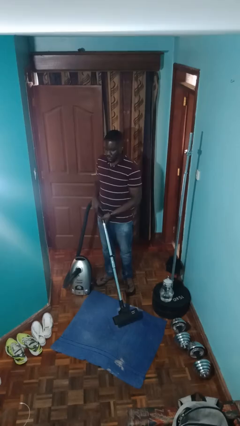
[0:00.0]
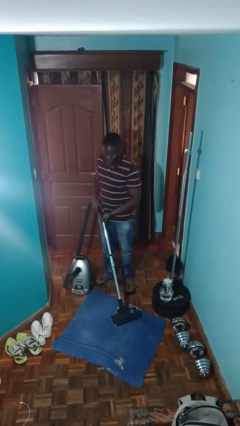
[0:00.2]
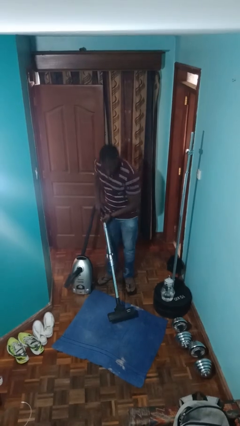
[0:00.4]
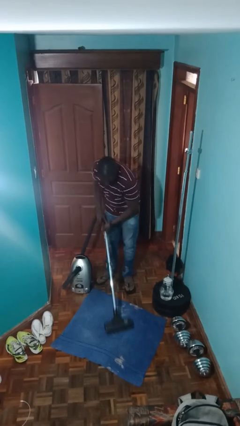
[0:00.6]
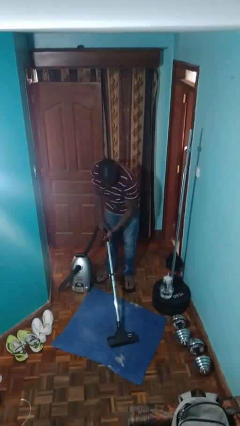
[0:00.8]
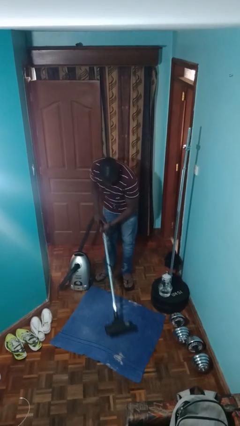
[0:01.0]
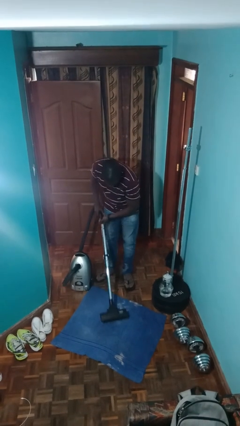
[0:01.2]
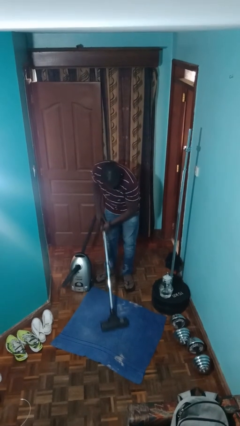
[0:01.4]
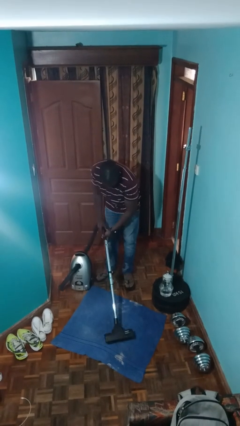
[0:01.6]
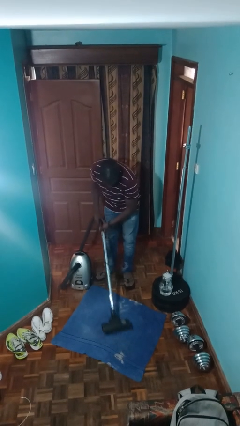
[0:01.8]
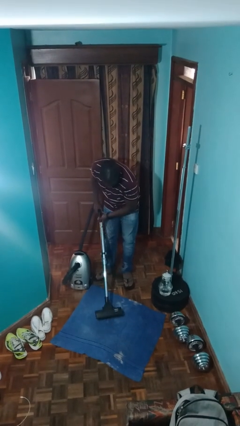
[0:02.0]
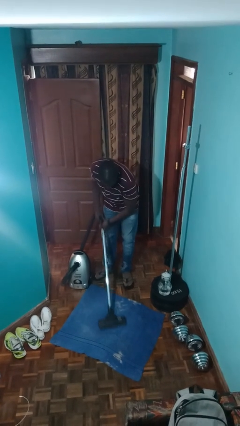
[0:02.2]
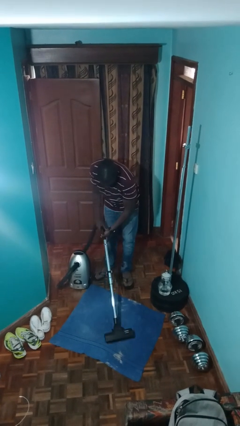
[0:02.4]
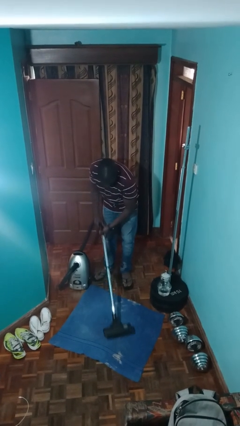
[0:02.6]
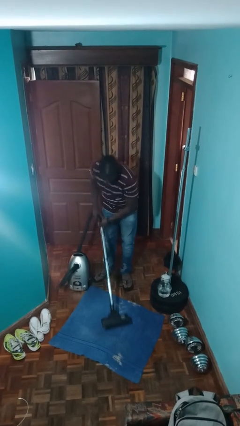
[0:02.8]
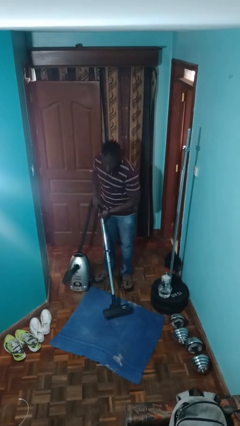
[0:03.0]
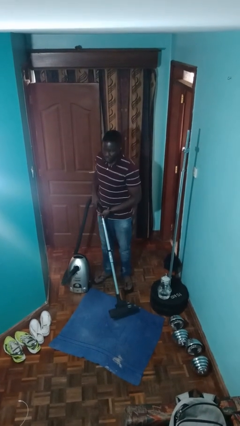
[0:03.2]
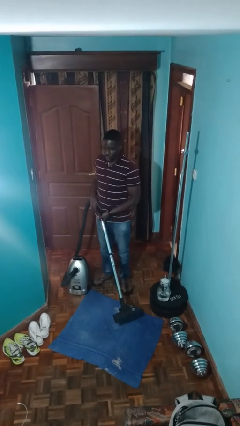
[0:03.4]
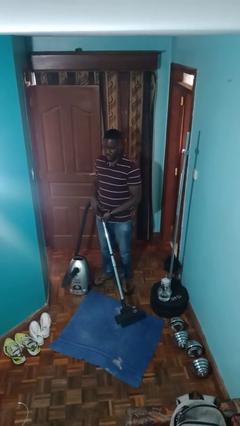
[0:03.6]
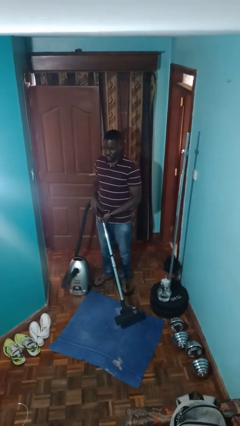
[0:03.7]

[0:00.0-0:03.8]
person vacuums carpet

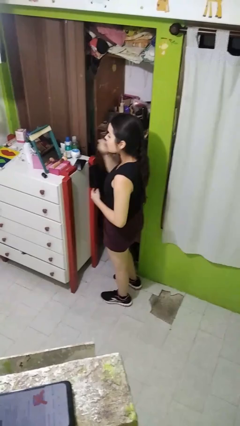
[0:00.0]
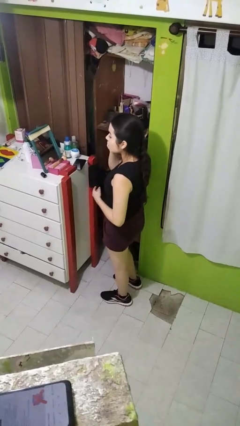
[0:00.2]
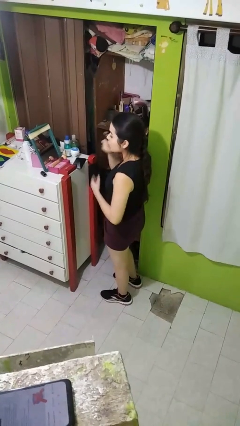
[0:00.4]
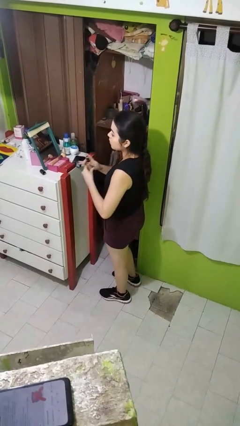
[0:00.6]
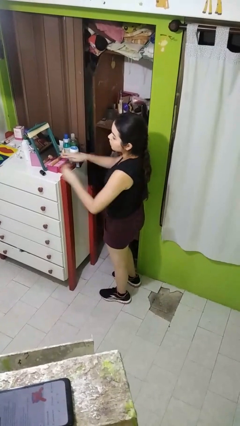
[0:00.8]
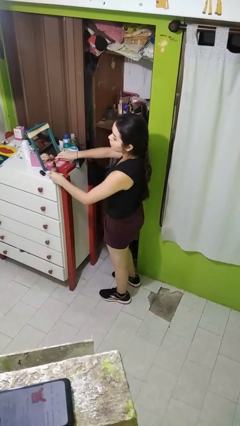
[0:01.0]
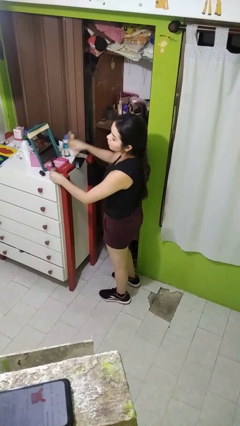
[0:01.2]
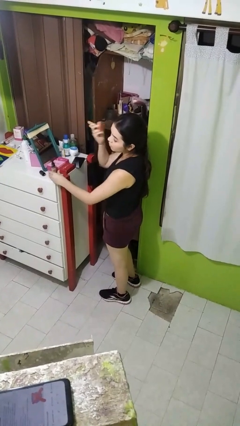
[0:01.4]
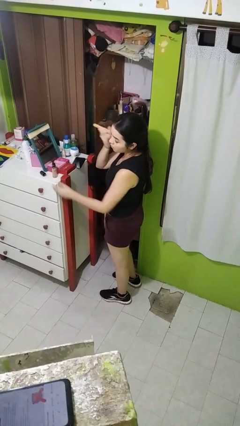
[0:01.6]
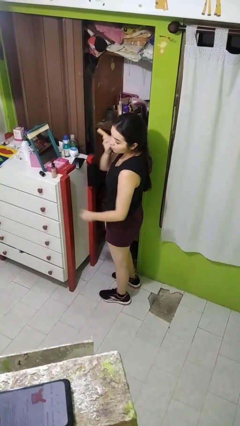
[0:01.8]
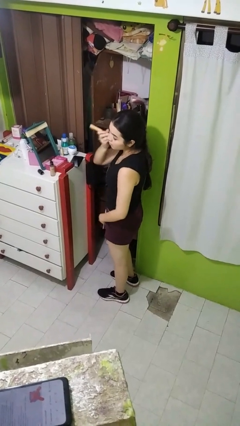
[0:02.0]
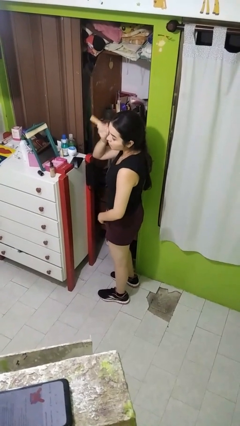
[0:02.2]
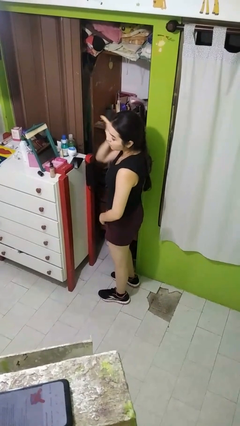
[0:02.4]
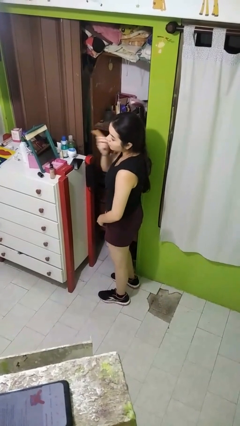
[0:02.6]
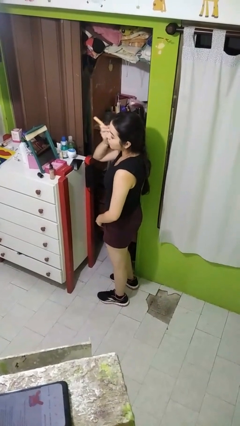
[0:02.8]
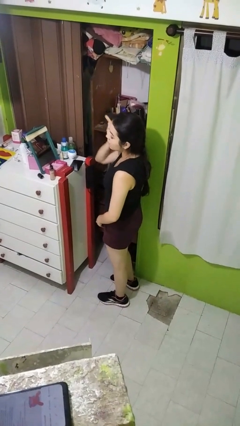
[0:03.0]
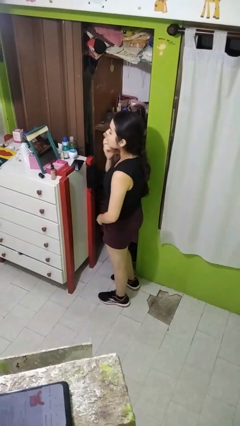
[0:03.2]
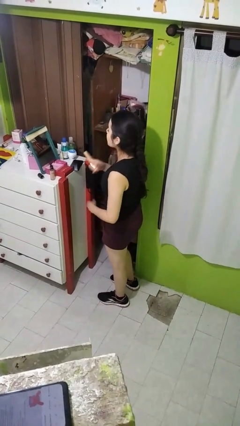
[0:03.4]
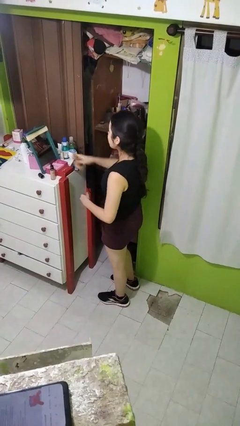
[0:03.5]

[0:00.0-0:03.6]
person applies foundation makeup

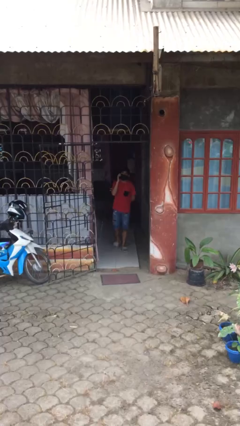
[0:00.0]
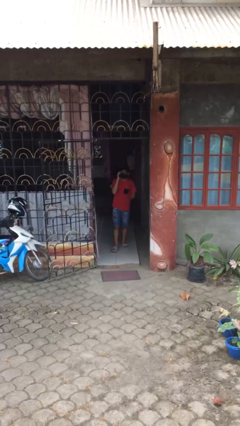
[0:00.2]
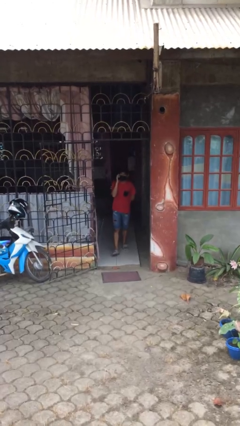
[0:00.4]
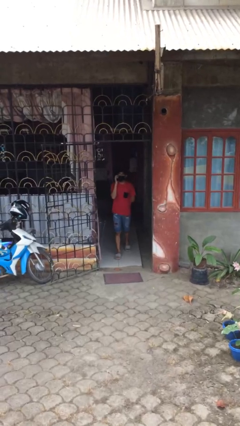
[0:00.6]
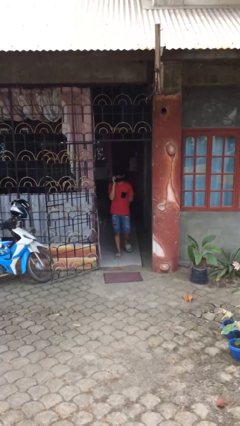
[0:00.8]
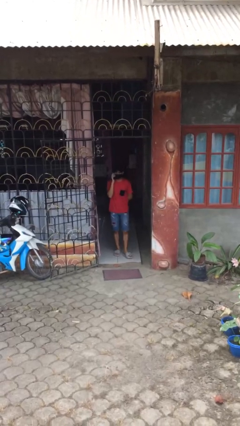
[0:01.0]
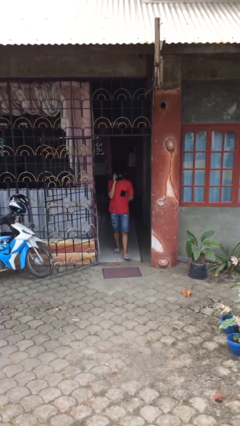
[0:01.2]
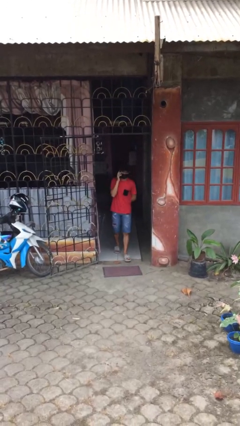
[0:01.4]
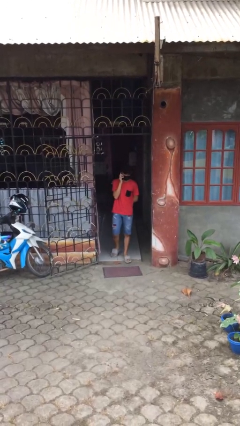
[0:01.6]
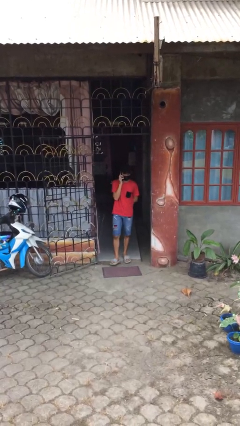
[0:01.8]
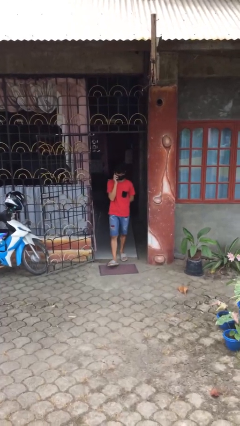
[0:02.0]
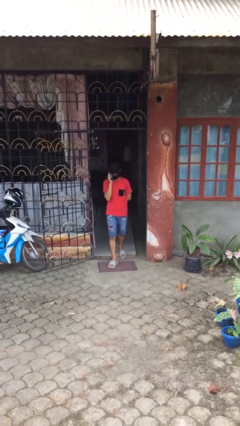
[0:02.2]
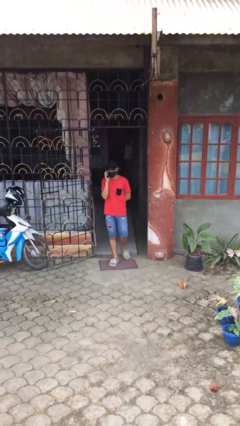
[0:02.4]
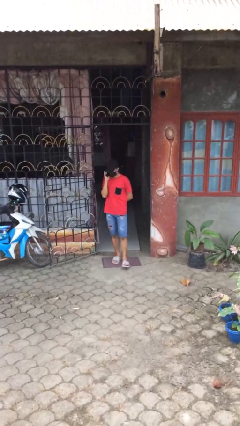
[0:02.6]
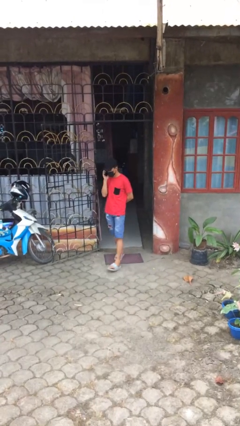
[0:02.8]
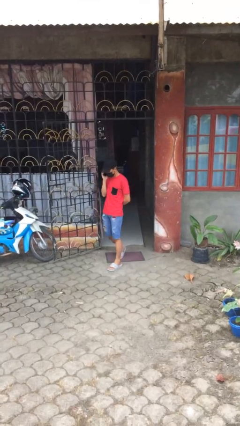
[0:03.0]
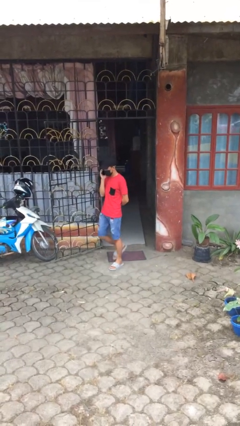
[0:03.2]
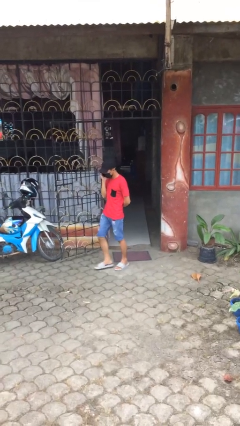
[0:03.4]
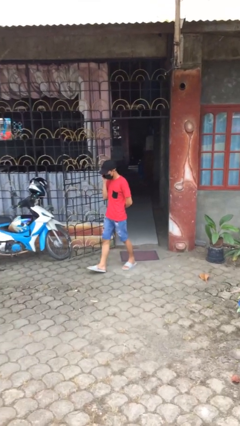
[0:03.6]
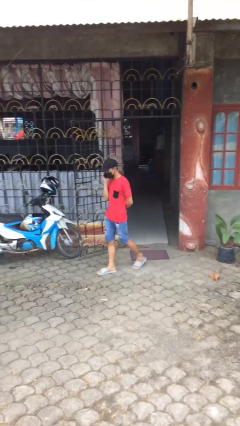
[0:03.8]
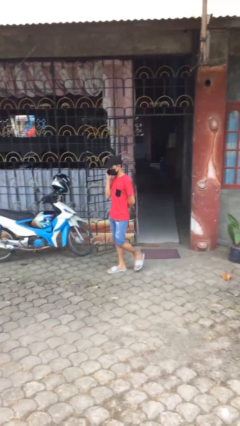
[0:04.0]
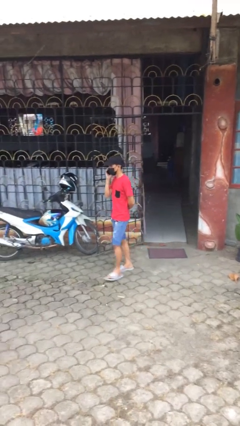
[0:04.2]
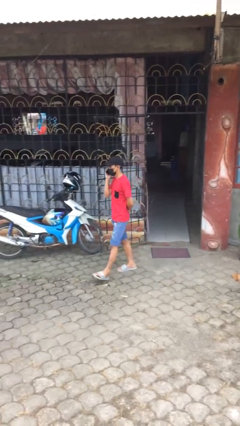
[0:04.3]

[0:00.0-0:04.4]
person enters scene through structure

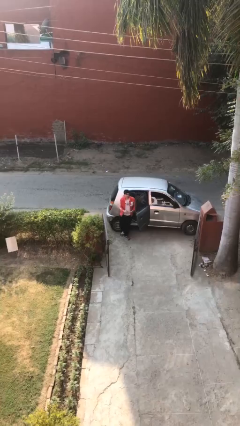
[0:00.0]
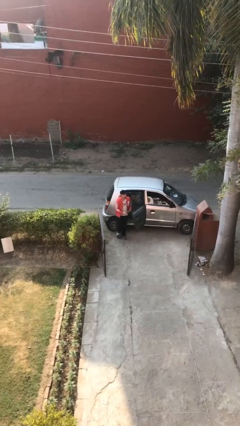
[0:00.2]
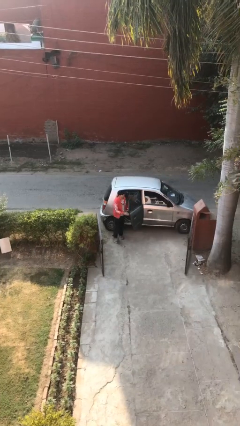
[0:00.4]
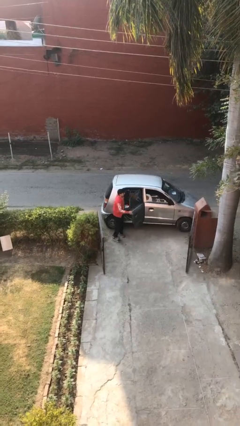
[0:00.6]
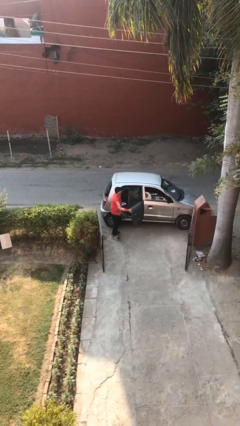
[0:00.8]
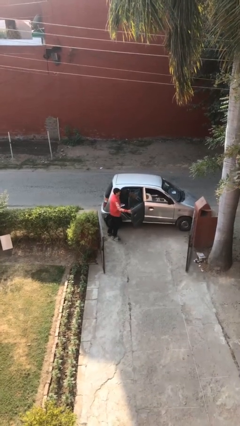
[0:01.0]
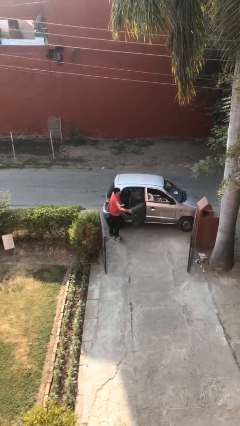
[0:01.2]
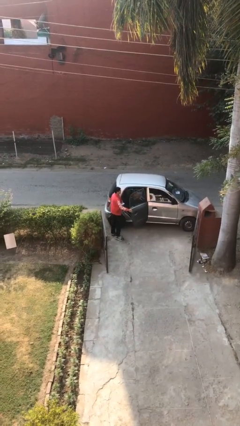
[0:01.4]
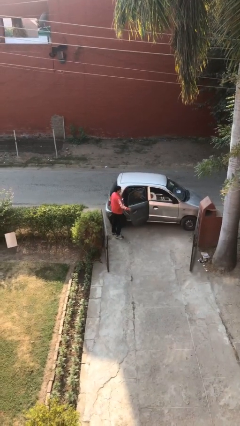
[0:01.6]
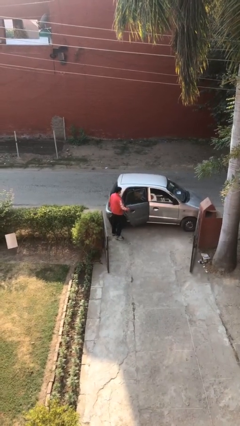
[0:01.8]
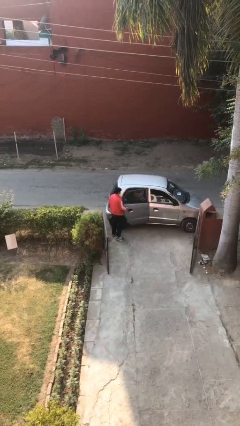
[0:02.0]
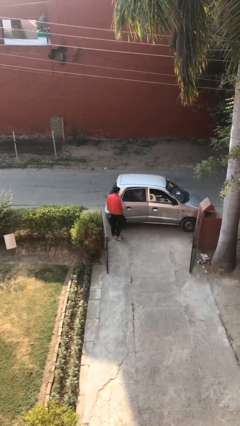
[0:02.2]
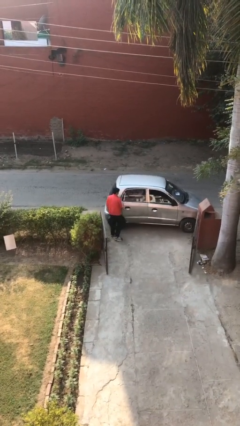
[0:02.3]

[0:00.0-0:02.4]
person closes car door

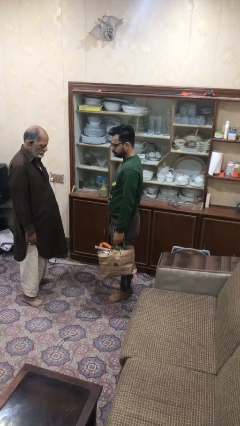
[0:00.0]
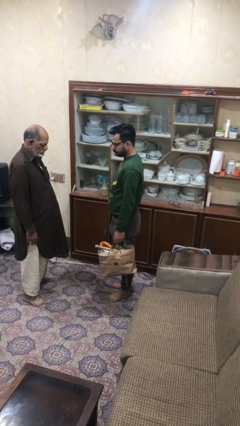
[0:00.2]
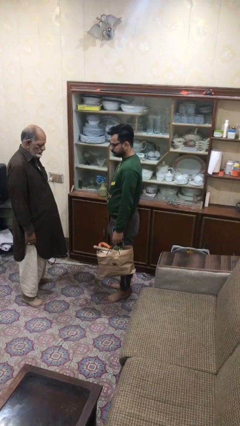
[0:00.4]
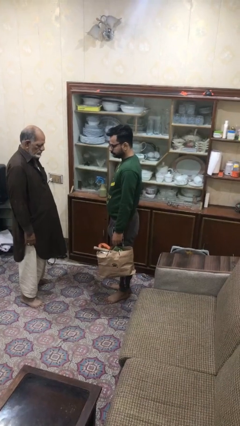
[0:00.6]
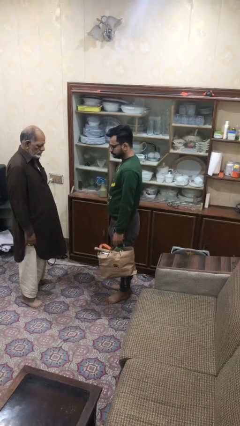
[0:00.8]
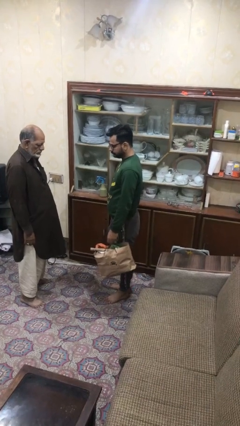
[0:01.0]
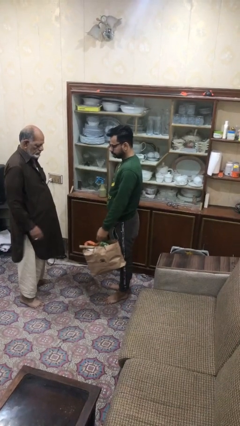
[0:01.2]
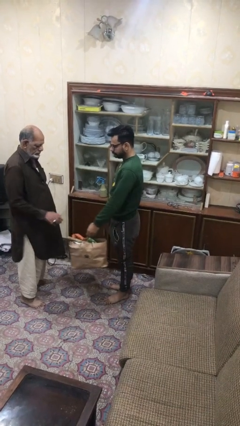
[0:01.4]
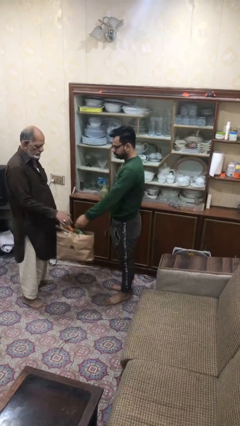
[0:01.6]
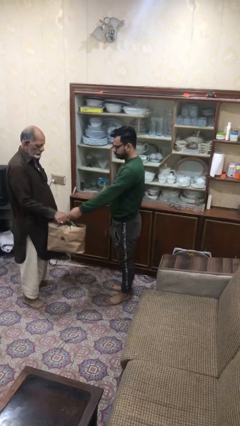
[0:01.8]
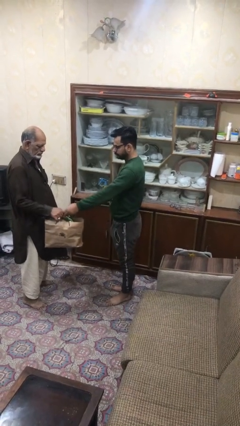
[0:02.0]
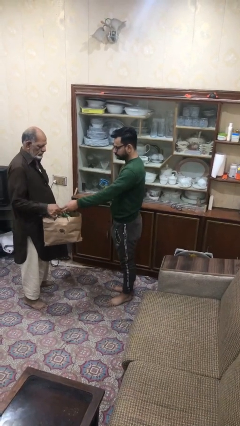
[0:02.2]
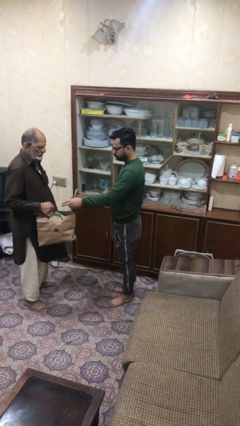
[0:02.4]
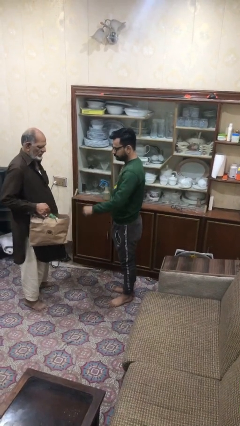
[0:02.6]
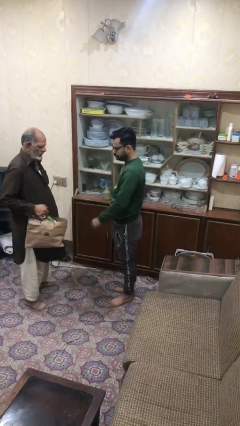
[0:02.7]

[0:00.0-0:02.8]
person transfers object to person

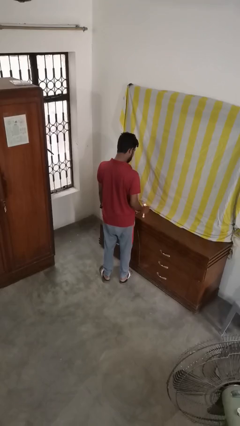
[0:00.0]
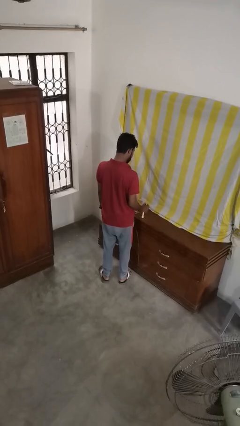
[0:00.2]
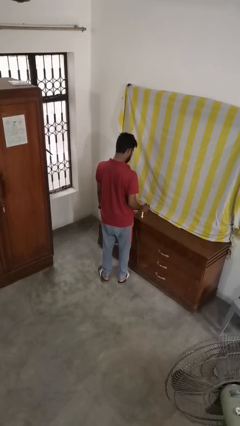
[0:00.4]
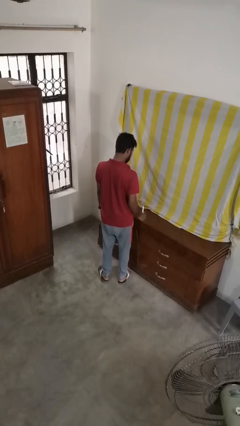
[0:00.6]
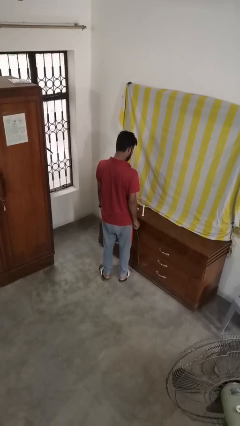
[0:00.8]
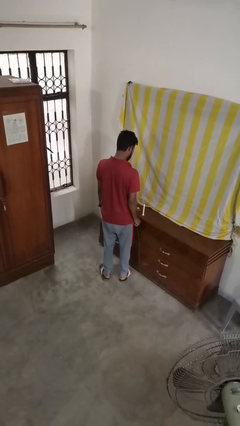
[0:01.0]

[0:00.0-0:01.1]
person extinguishes candle
